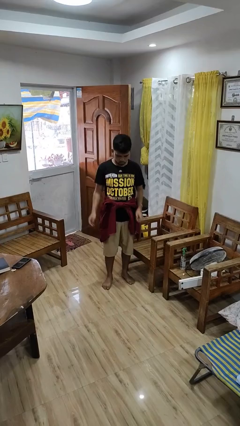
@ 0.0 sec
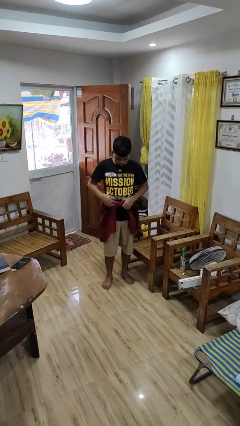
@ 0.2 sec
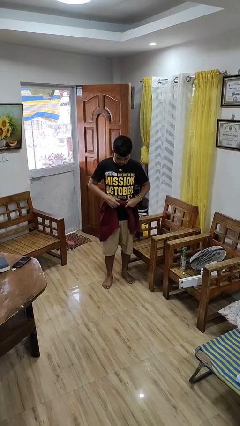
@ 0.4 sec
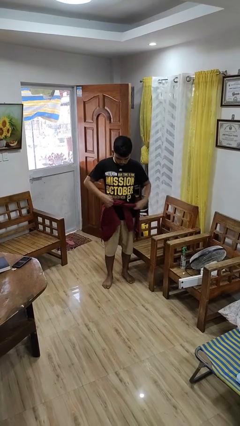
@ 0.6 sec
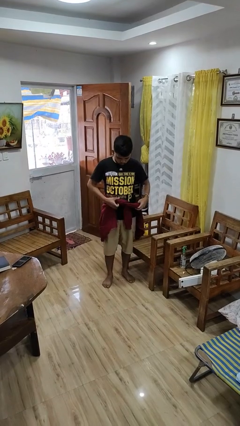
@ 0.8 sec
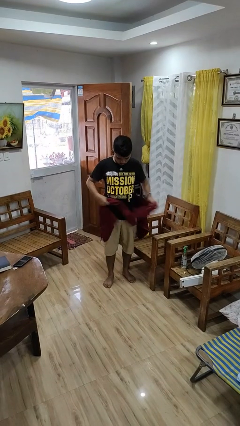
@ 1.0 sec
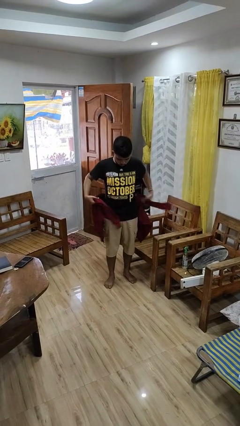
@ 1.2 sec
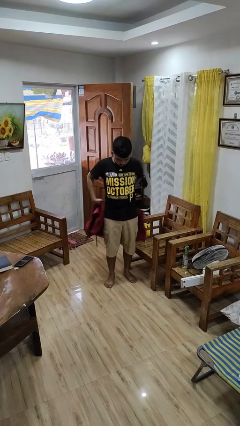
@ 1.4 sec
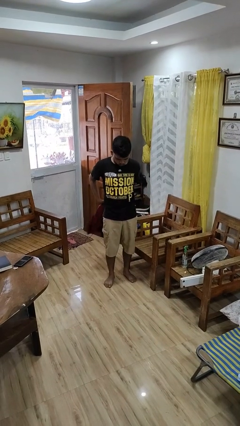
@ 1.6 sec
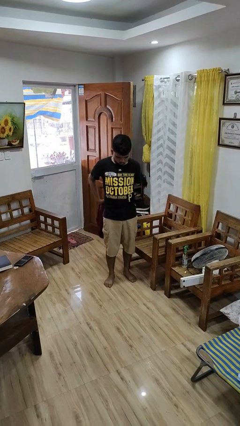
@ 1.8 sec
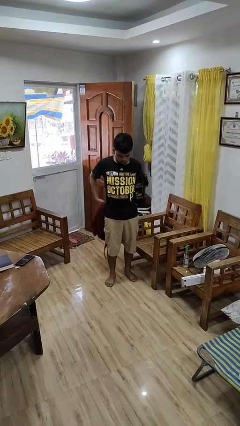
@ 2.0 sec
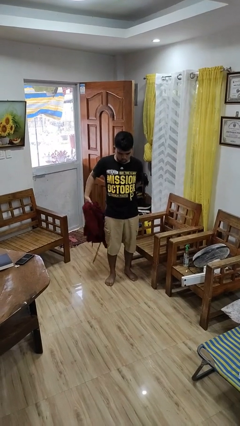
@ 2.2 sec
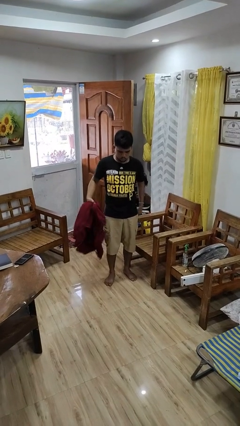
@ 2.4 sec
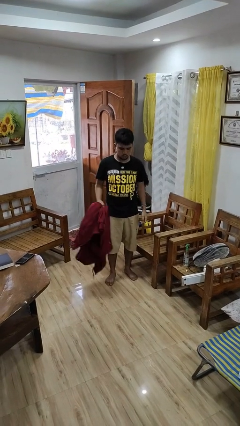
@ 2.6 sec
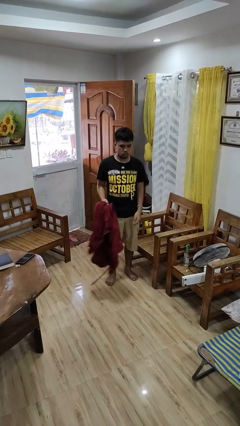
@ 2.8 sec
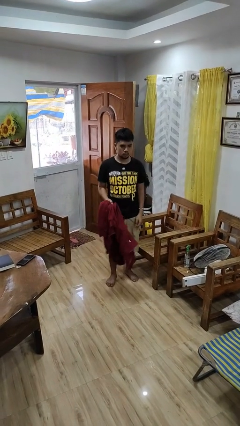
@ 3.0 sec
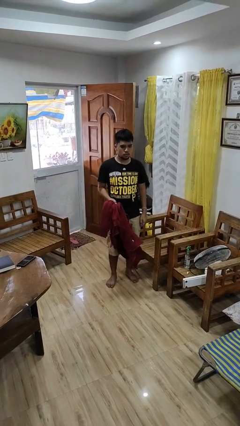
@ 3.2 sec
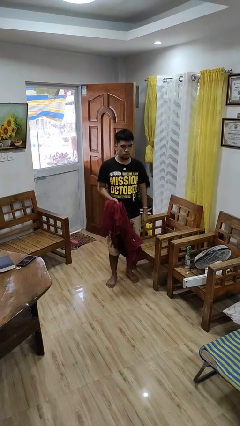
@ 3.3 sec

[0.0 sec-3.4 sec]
person unties jacket around waist

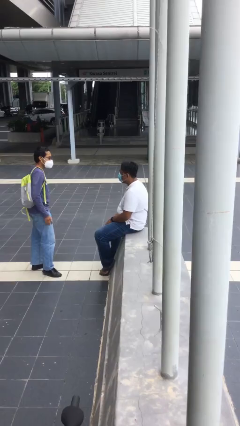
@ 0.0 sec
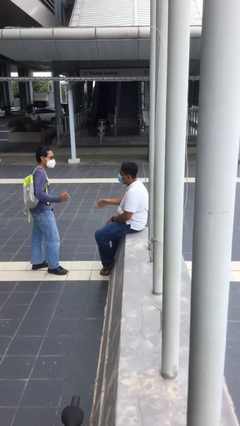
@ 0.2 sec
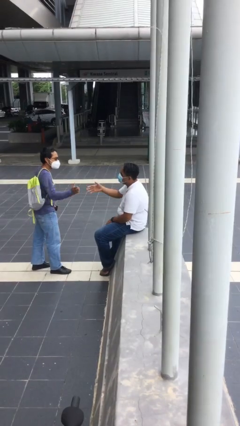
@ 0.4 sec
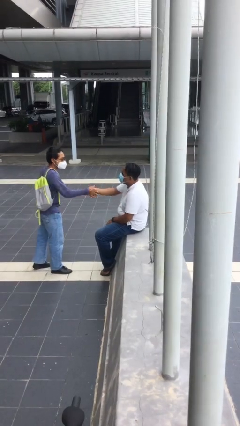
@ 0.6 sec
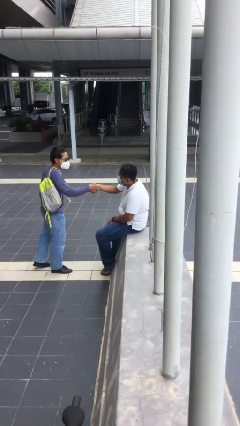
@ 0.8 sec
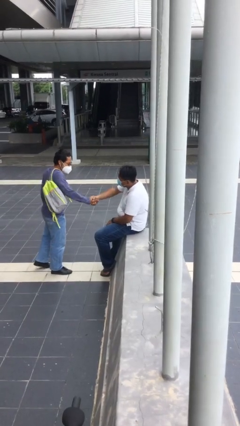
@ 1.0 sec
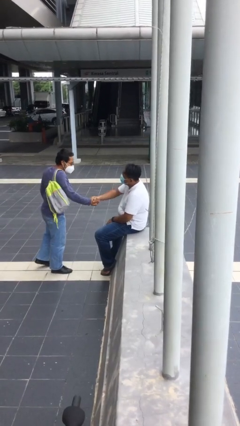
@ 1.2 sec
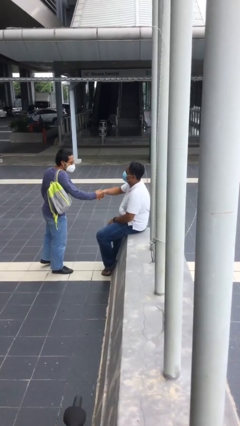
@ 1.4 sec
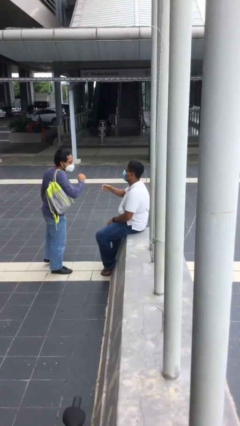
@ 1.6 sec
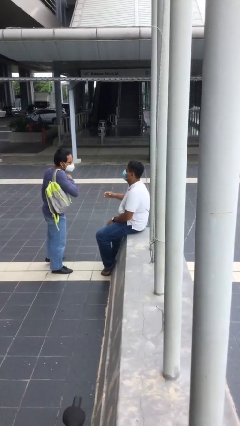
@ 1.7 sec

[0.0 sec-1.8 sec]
person shakes hand

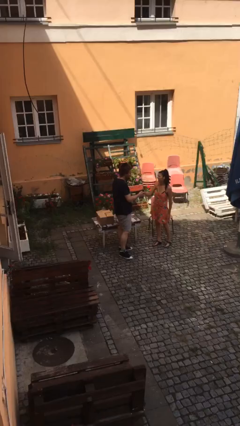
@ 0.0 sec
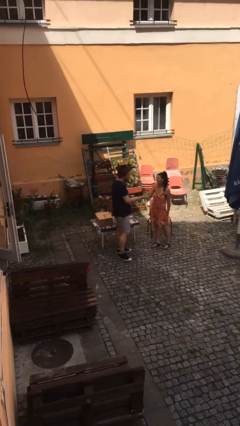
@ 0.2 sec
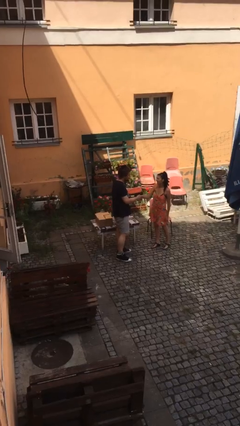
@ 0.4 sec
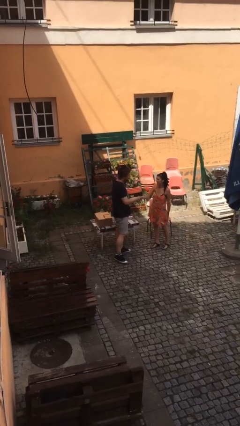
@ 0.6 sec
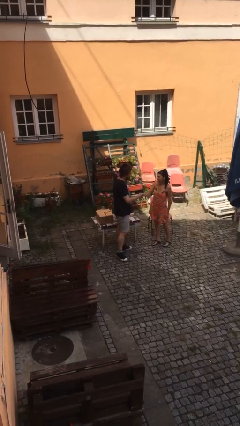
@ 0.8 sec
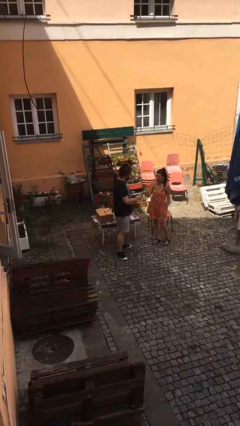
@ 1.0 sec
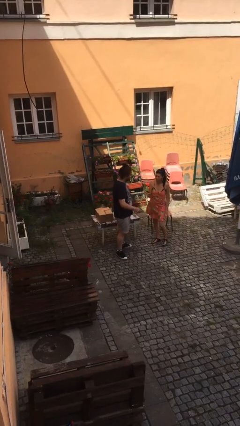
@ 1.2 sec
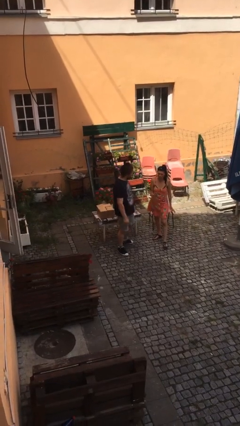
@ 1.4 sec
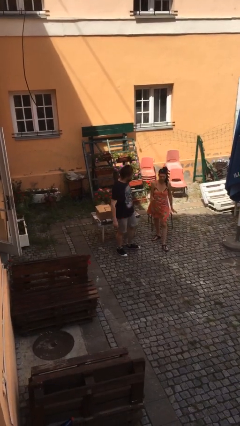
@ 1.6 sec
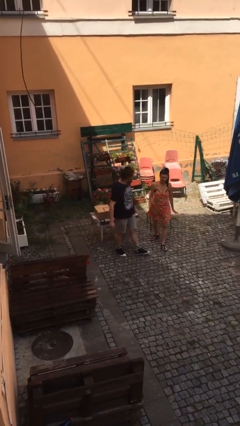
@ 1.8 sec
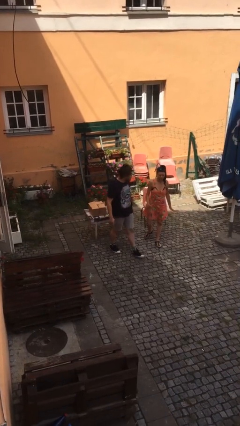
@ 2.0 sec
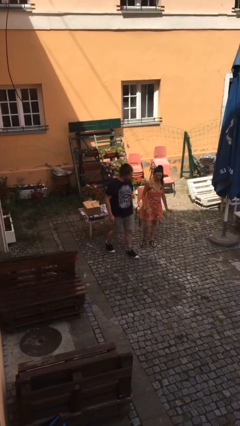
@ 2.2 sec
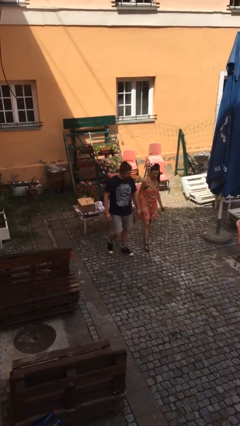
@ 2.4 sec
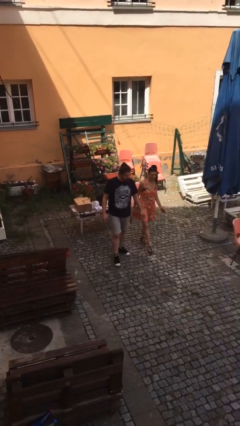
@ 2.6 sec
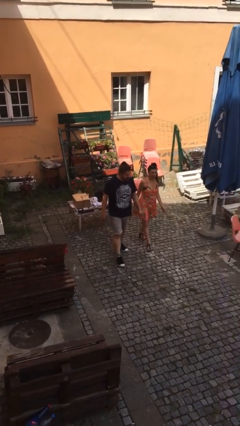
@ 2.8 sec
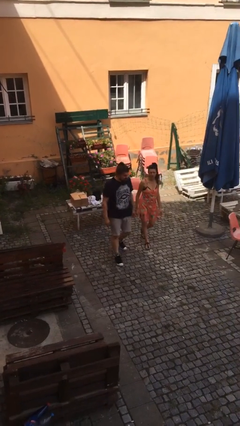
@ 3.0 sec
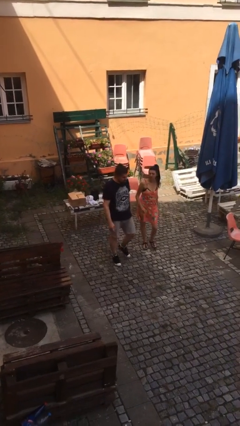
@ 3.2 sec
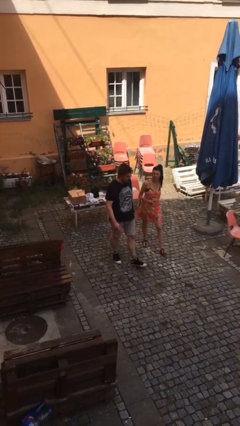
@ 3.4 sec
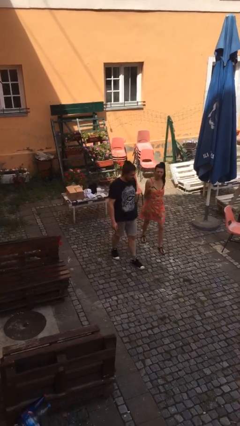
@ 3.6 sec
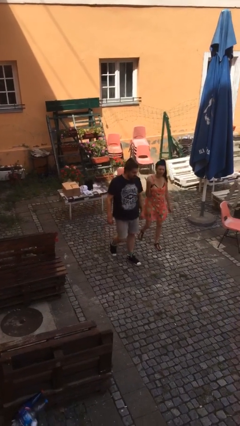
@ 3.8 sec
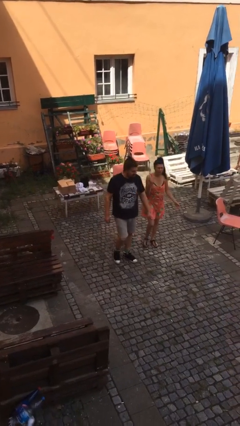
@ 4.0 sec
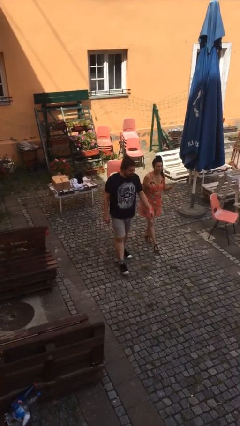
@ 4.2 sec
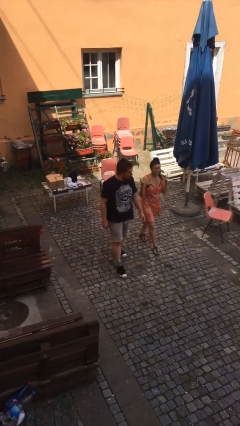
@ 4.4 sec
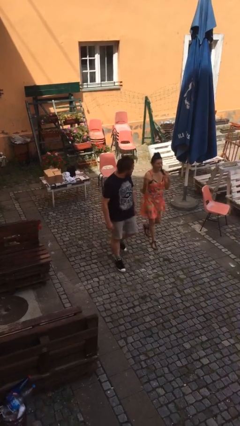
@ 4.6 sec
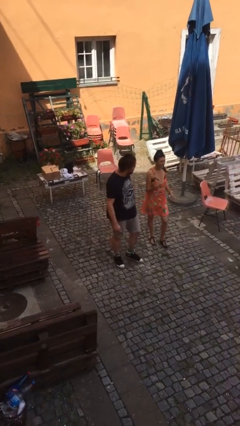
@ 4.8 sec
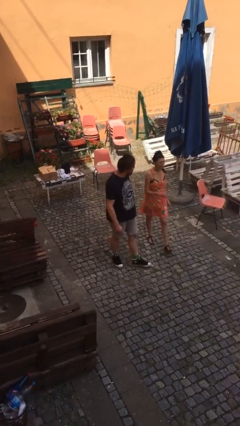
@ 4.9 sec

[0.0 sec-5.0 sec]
person talks to person

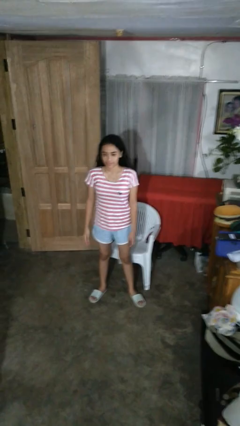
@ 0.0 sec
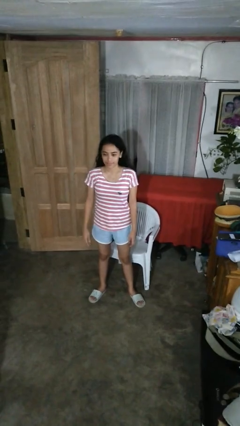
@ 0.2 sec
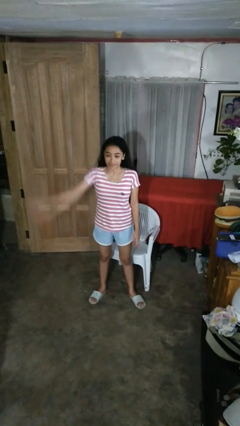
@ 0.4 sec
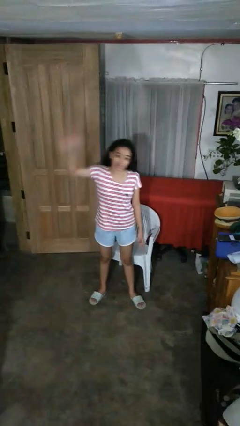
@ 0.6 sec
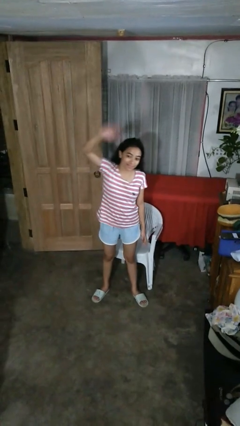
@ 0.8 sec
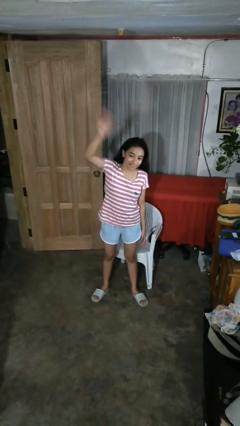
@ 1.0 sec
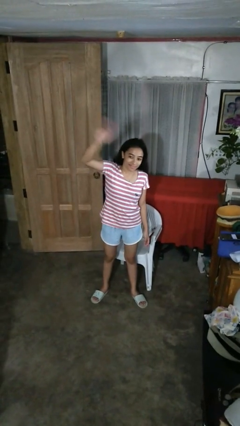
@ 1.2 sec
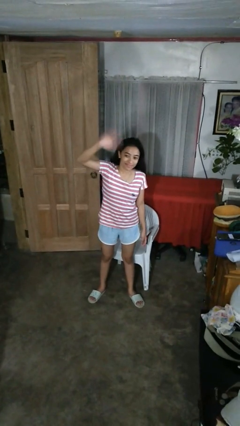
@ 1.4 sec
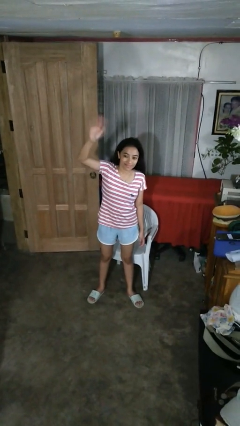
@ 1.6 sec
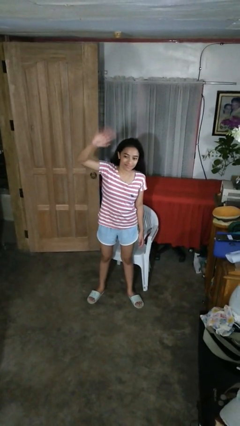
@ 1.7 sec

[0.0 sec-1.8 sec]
person waves at person

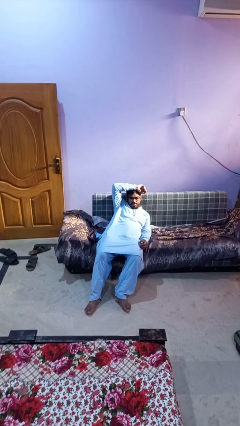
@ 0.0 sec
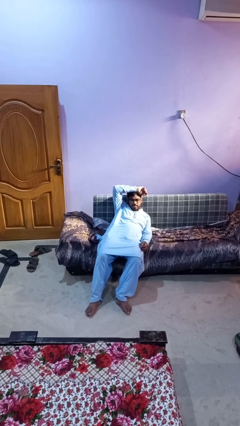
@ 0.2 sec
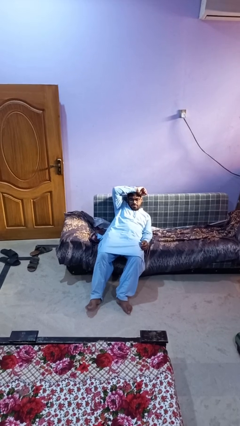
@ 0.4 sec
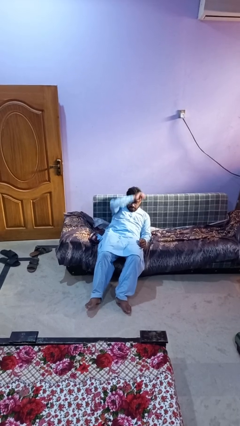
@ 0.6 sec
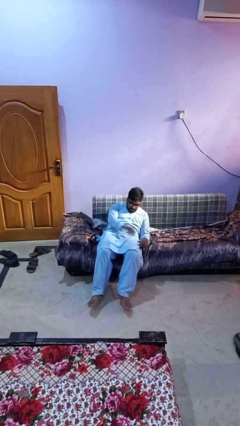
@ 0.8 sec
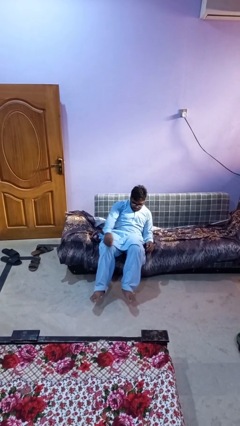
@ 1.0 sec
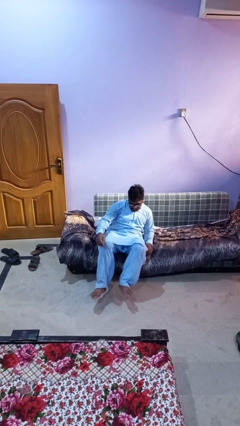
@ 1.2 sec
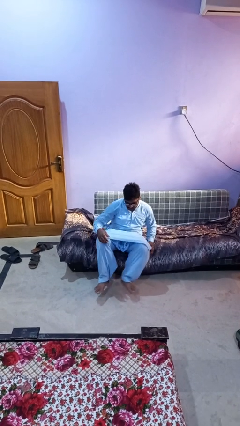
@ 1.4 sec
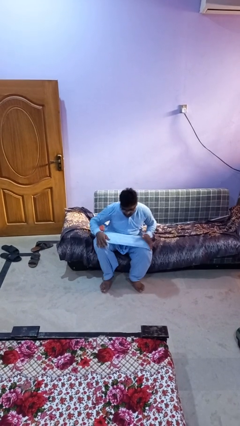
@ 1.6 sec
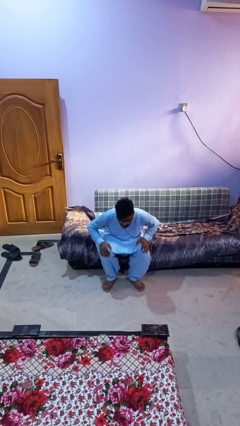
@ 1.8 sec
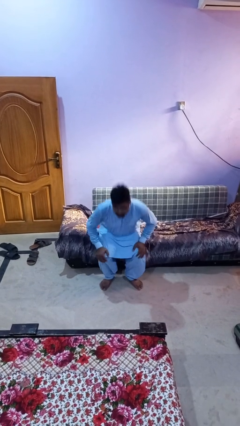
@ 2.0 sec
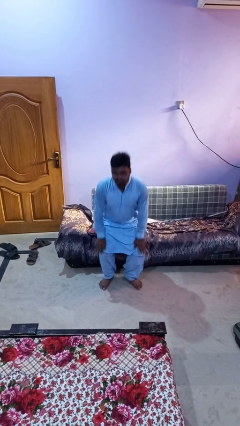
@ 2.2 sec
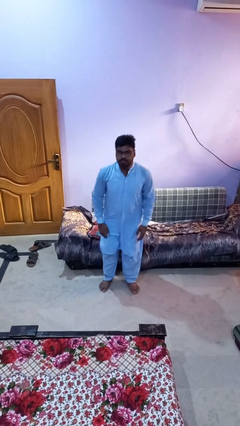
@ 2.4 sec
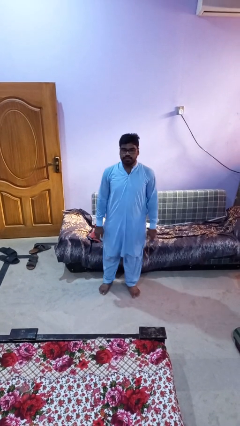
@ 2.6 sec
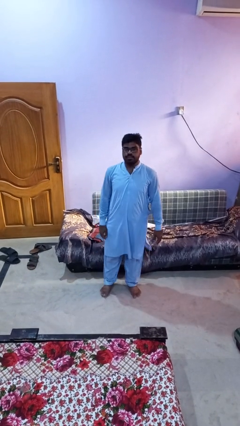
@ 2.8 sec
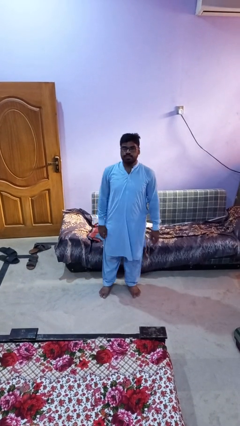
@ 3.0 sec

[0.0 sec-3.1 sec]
person stands up

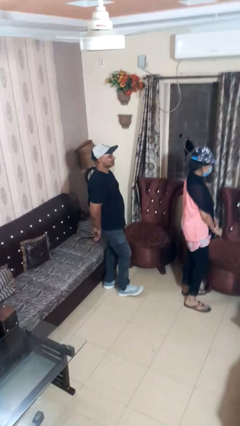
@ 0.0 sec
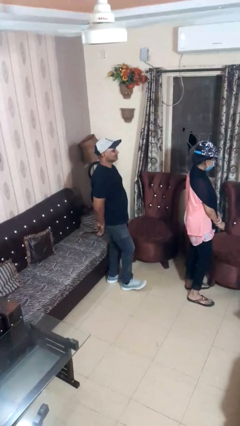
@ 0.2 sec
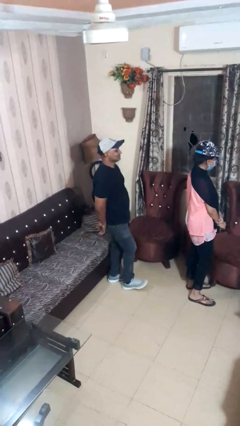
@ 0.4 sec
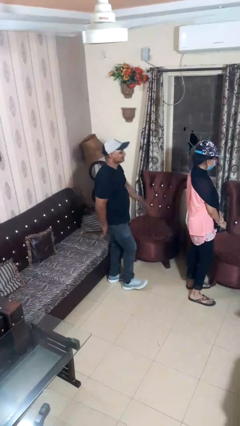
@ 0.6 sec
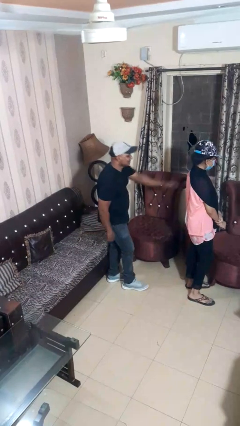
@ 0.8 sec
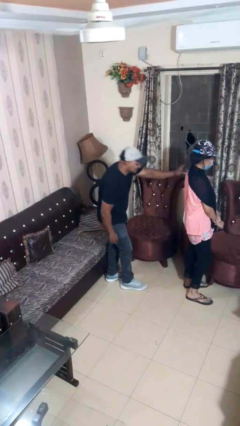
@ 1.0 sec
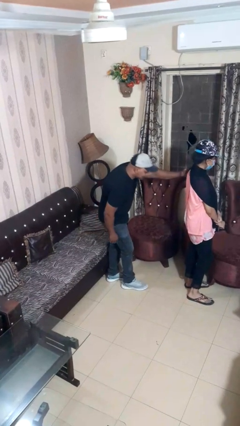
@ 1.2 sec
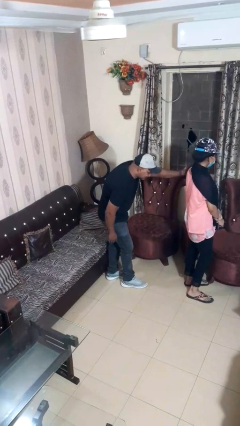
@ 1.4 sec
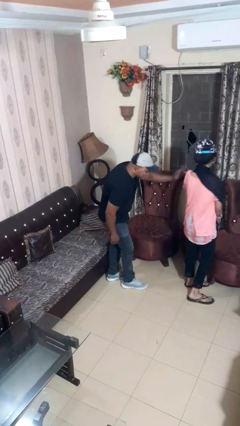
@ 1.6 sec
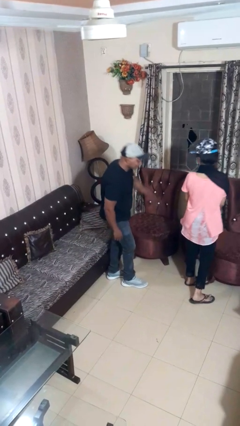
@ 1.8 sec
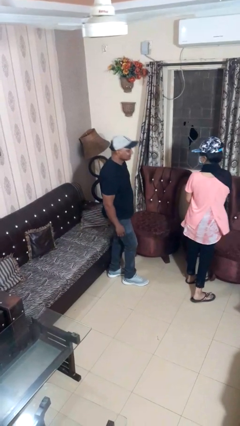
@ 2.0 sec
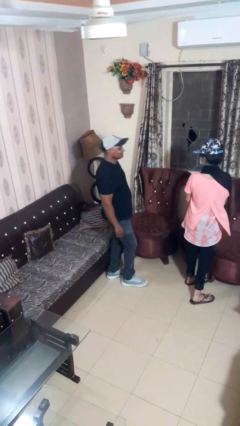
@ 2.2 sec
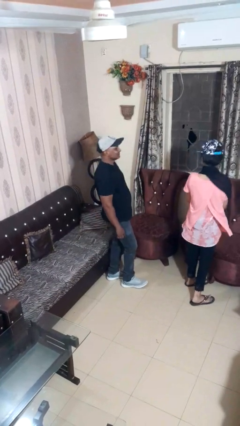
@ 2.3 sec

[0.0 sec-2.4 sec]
person touches back of person
